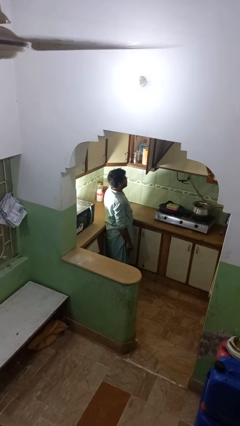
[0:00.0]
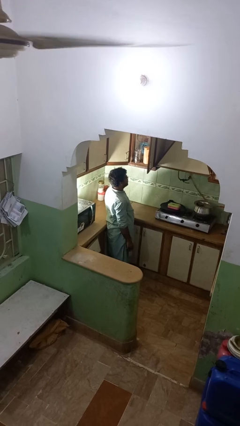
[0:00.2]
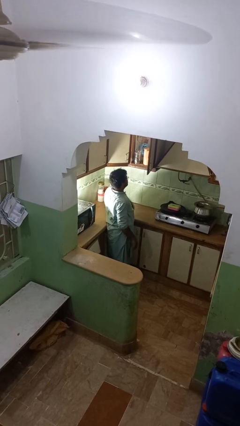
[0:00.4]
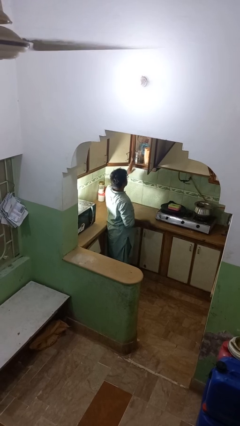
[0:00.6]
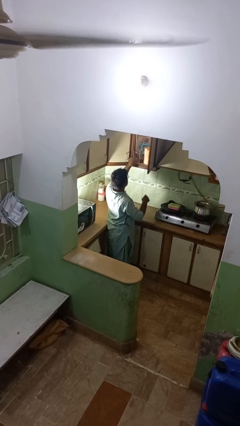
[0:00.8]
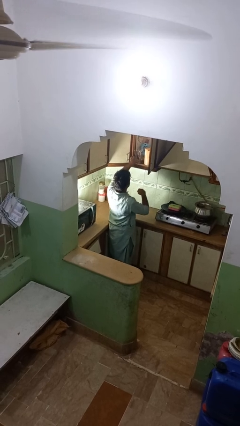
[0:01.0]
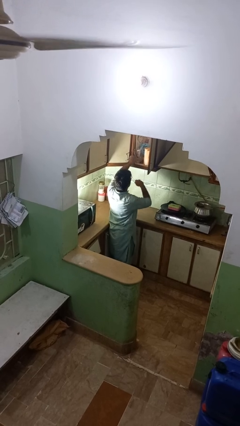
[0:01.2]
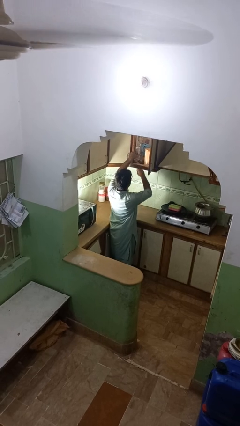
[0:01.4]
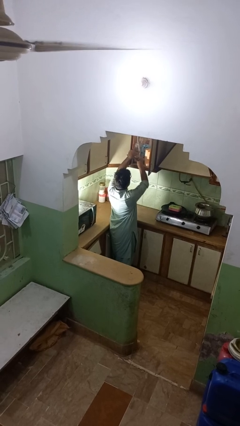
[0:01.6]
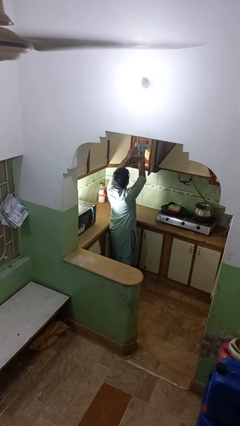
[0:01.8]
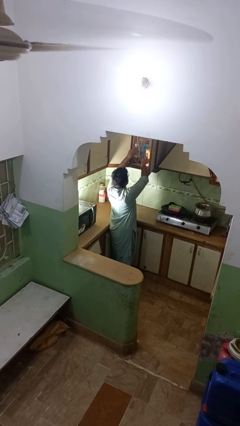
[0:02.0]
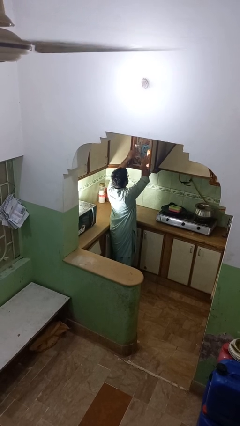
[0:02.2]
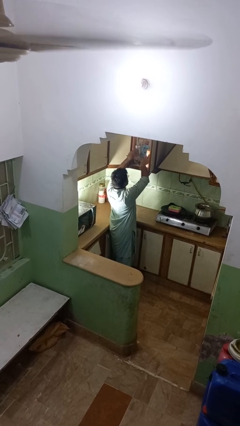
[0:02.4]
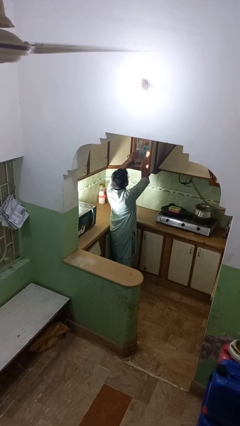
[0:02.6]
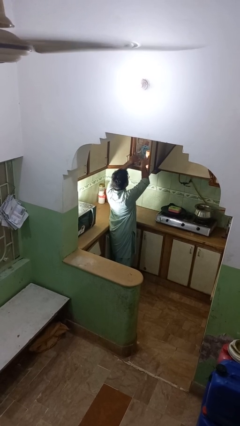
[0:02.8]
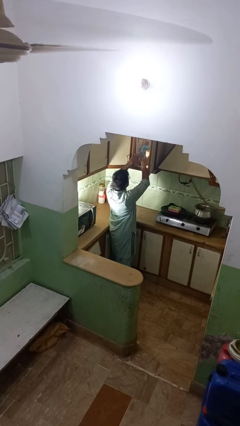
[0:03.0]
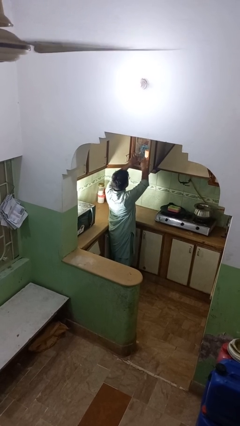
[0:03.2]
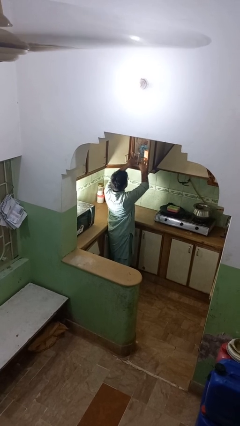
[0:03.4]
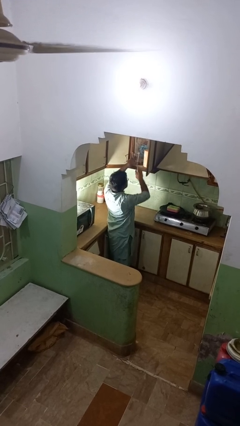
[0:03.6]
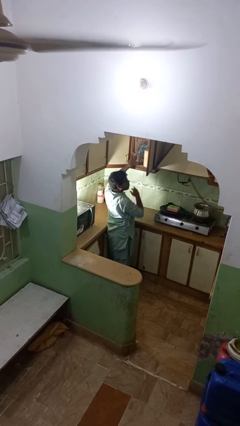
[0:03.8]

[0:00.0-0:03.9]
person searches in kitchen drawer

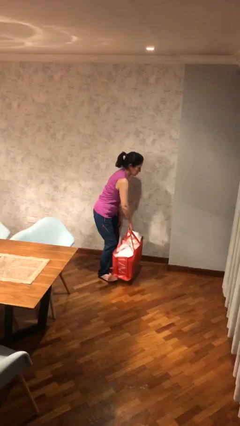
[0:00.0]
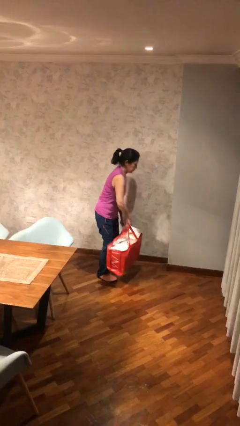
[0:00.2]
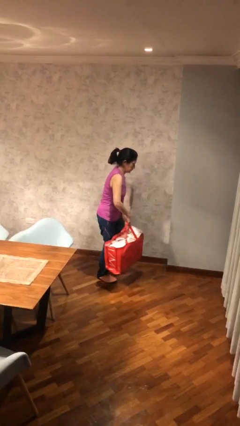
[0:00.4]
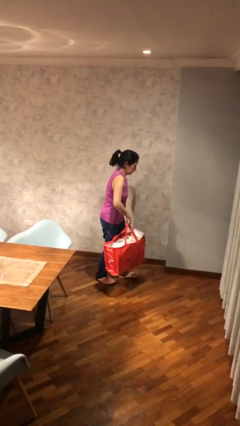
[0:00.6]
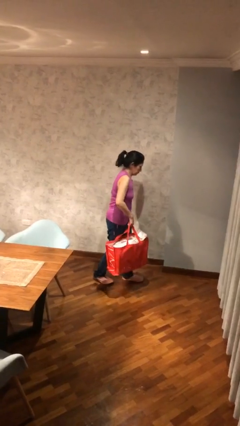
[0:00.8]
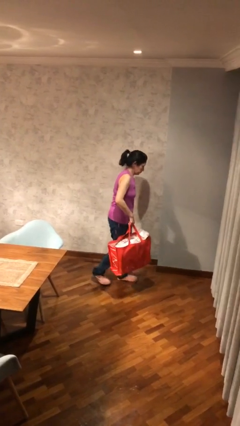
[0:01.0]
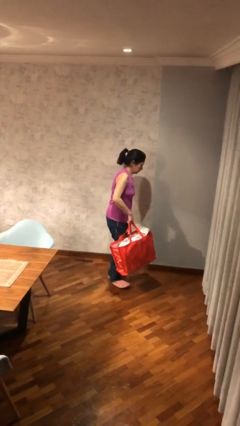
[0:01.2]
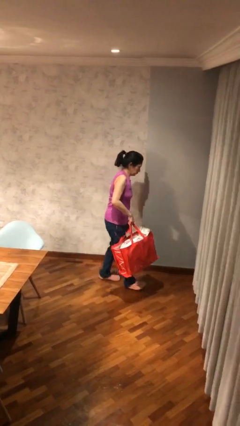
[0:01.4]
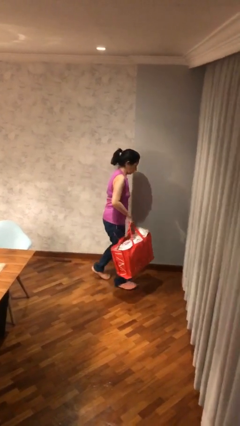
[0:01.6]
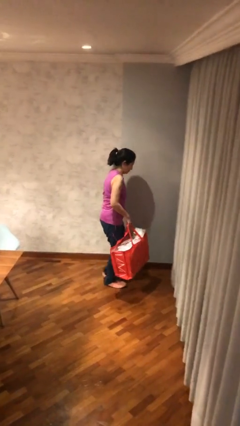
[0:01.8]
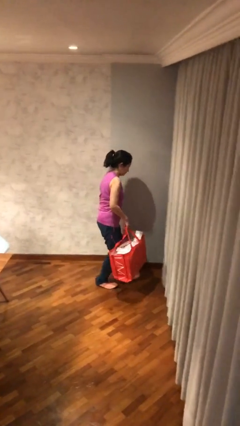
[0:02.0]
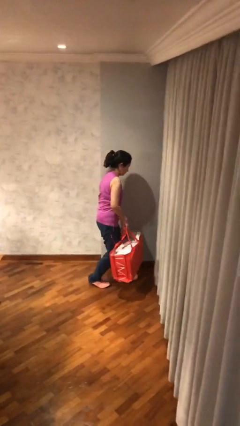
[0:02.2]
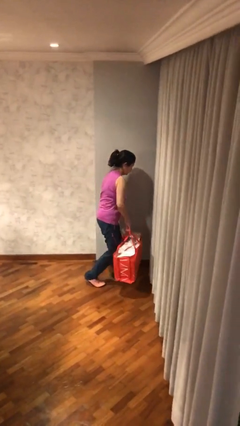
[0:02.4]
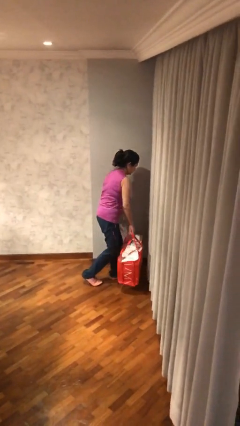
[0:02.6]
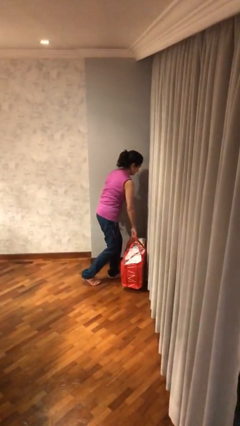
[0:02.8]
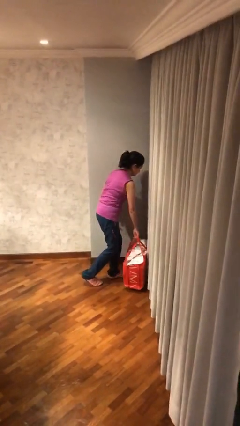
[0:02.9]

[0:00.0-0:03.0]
person carries heavy object

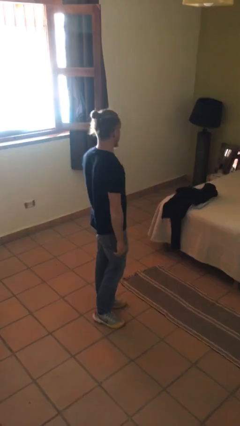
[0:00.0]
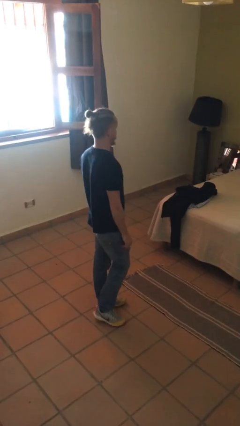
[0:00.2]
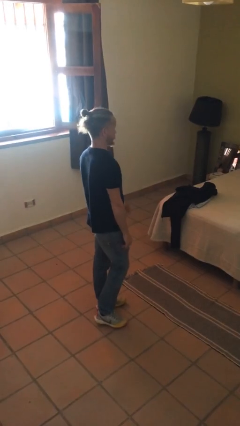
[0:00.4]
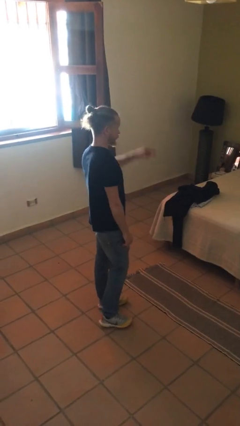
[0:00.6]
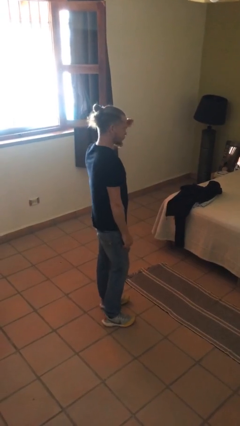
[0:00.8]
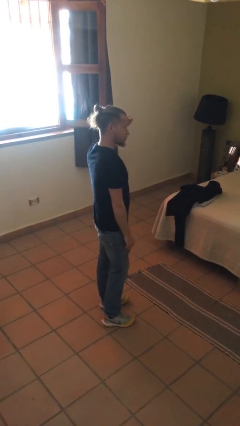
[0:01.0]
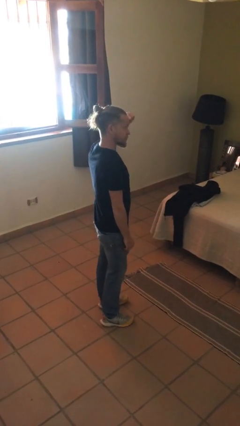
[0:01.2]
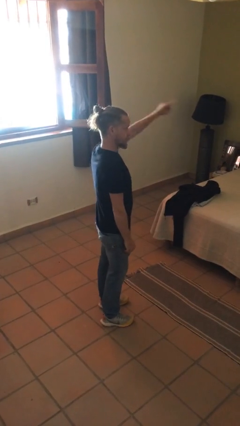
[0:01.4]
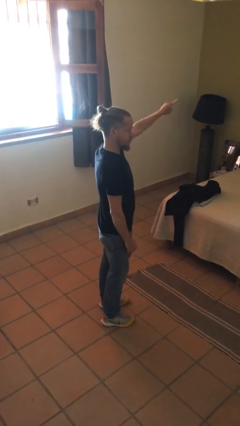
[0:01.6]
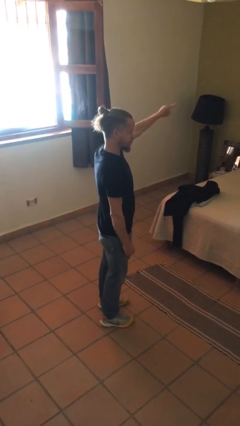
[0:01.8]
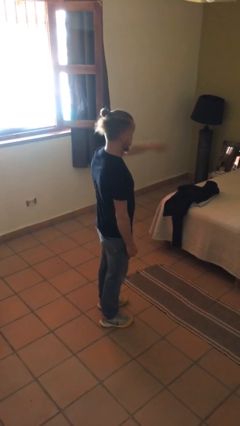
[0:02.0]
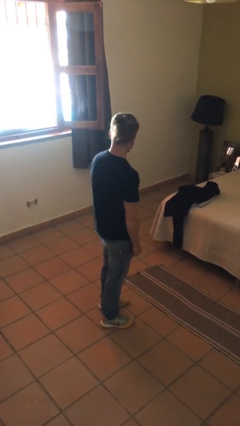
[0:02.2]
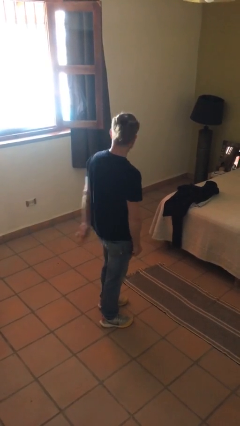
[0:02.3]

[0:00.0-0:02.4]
person salutes

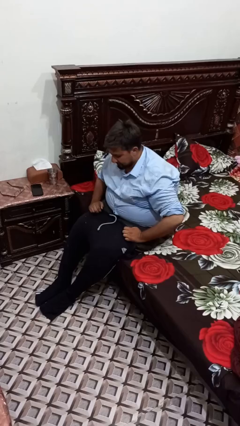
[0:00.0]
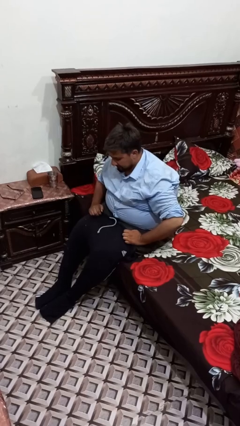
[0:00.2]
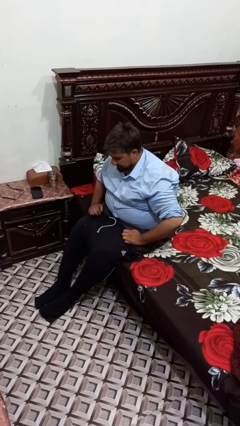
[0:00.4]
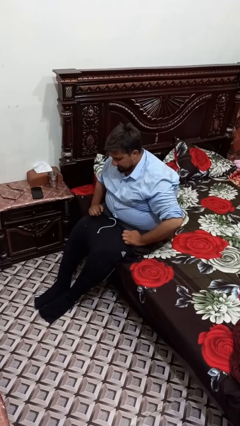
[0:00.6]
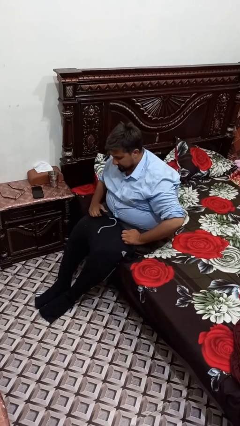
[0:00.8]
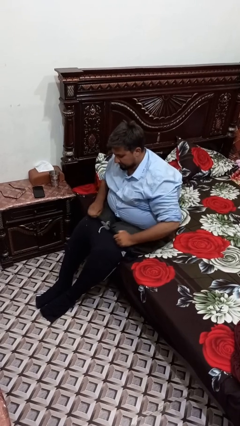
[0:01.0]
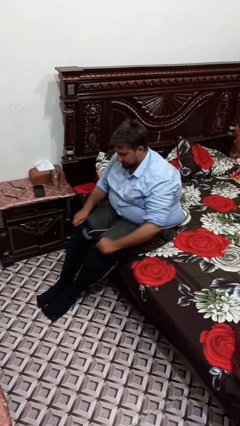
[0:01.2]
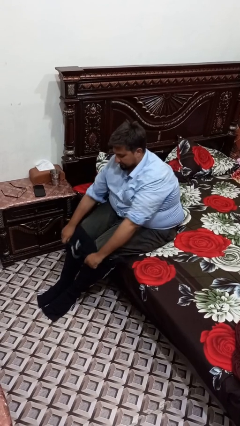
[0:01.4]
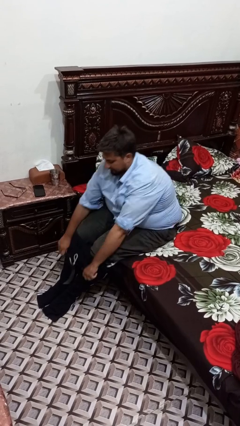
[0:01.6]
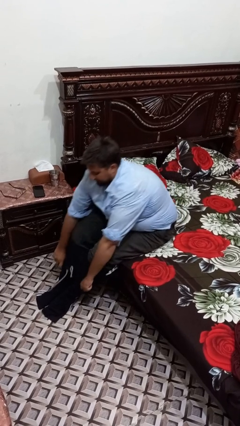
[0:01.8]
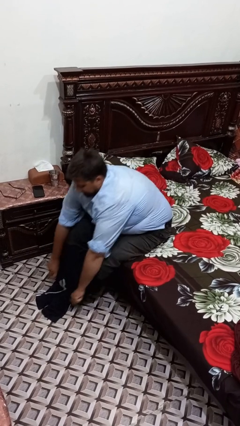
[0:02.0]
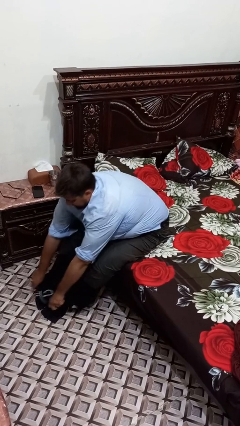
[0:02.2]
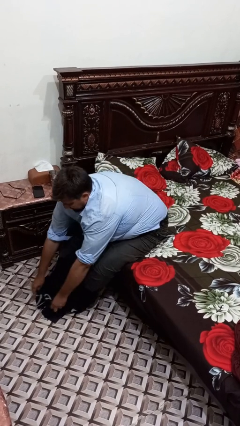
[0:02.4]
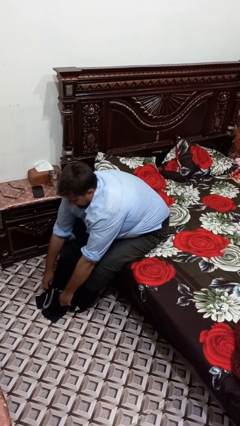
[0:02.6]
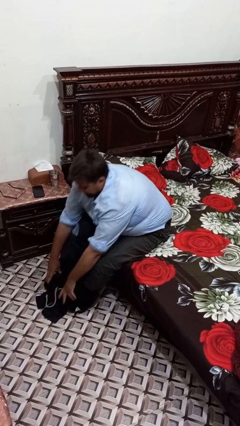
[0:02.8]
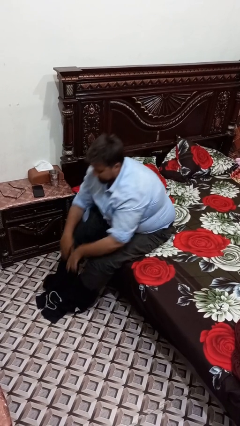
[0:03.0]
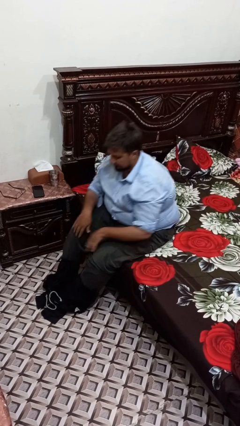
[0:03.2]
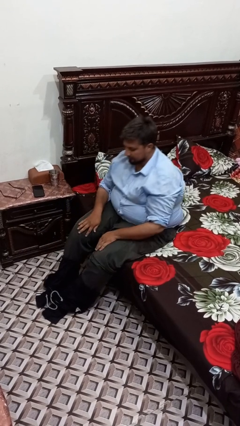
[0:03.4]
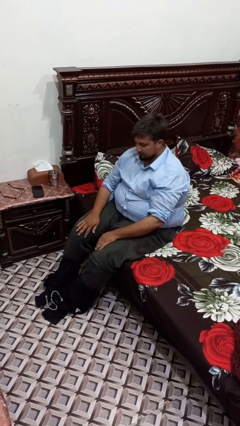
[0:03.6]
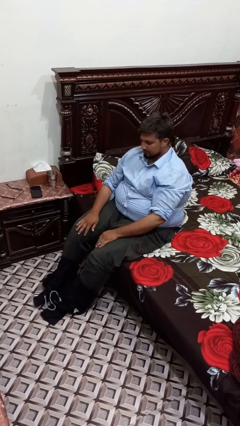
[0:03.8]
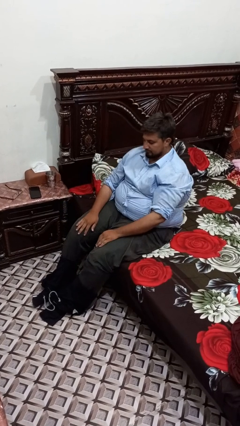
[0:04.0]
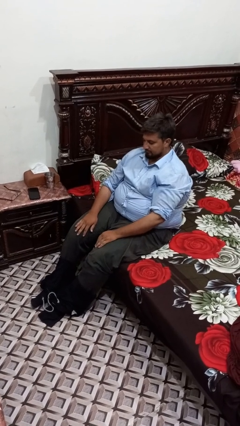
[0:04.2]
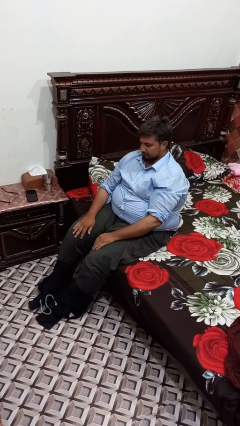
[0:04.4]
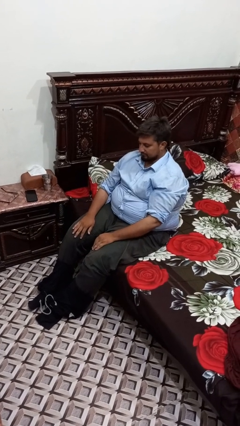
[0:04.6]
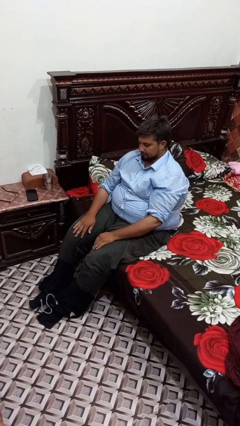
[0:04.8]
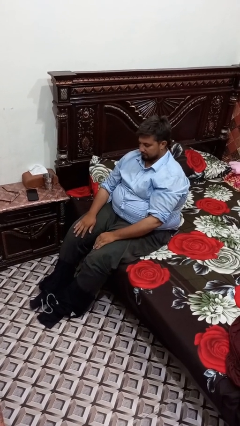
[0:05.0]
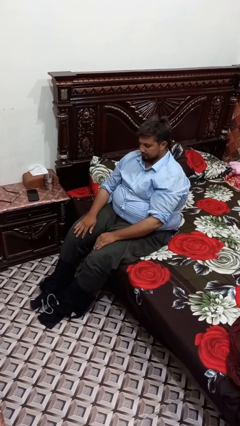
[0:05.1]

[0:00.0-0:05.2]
person takes off pants

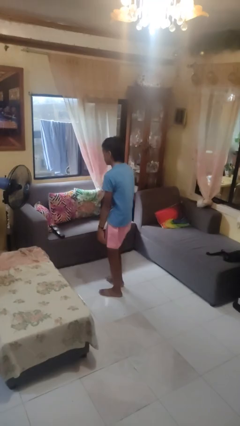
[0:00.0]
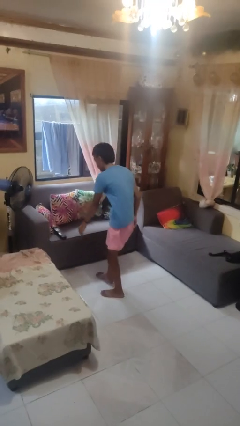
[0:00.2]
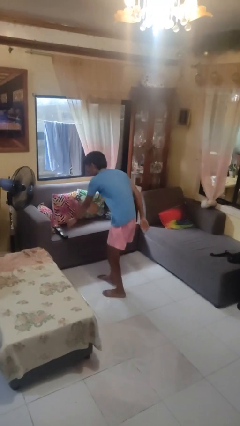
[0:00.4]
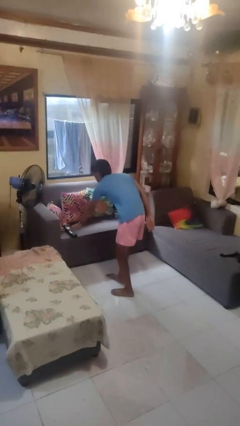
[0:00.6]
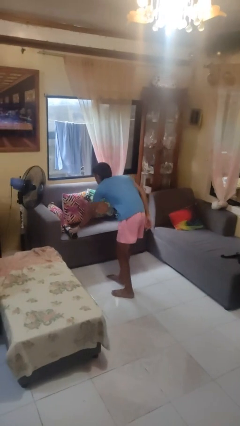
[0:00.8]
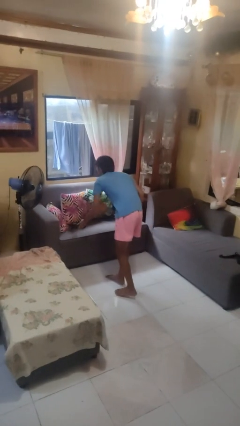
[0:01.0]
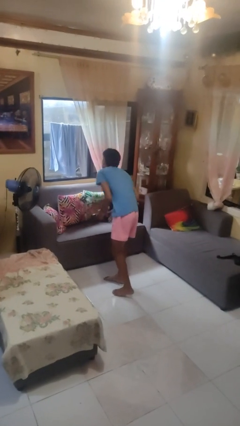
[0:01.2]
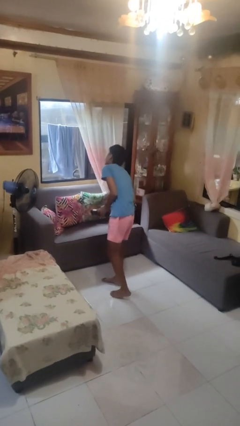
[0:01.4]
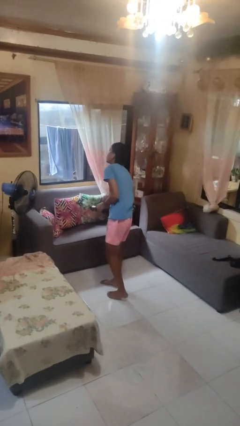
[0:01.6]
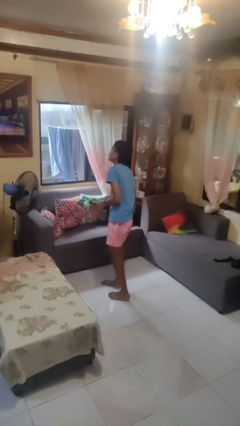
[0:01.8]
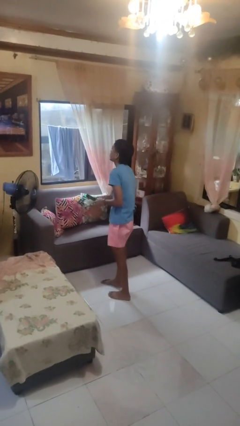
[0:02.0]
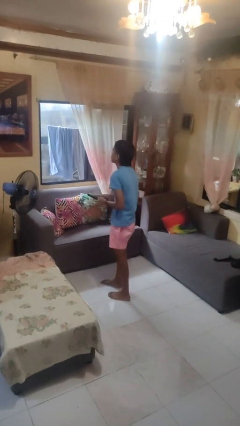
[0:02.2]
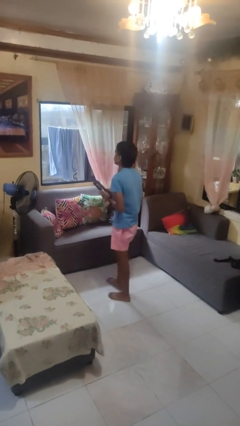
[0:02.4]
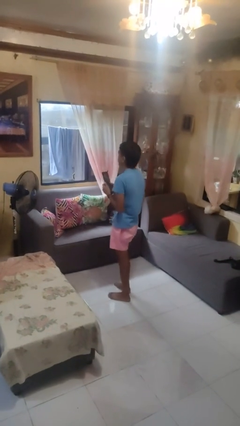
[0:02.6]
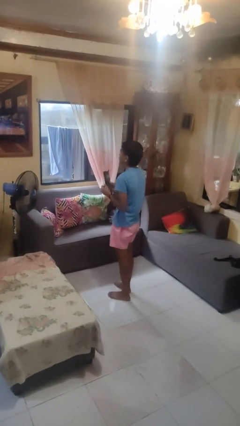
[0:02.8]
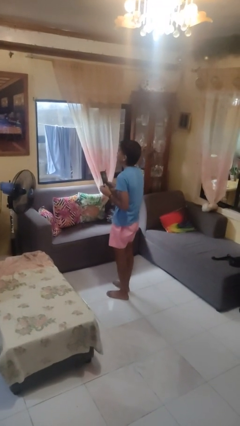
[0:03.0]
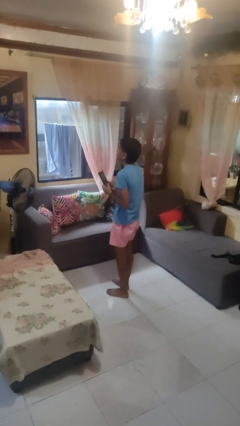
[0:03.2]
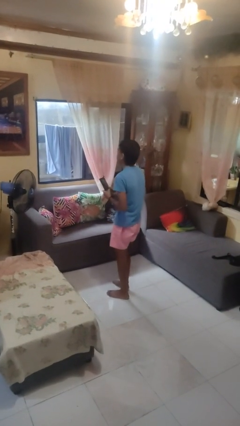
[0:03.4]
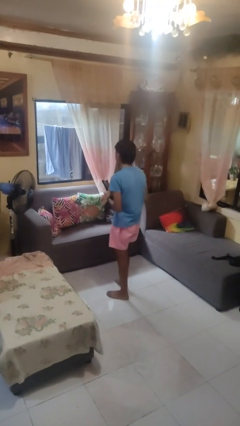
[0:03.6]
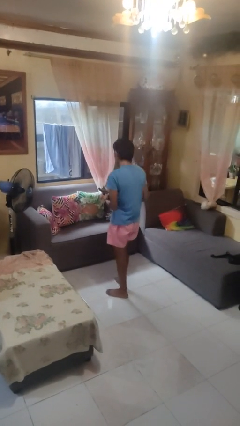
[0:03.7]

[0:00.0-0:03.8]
person picks up object from couch
